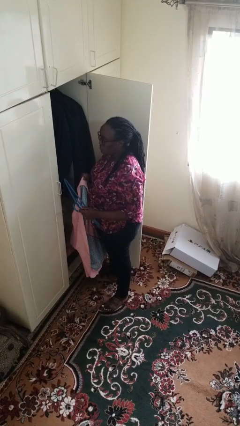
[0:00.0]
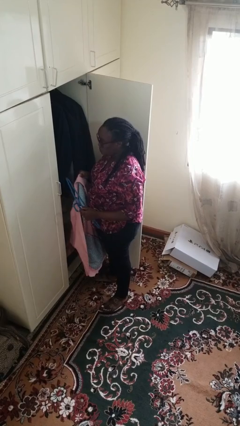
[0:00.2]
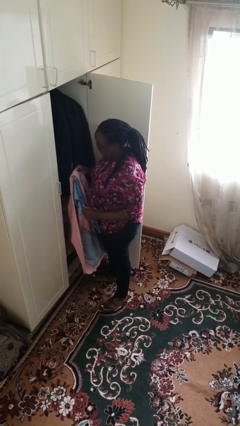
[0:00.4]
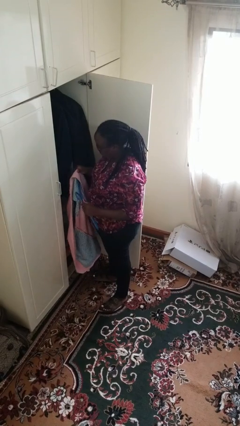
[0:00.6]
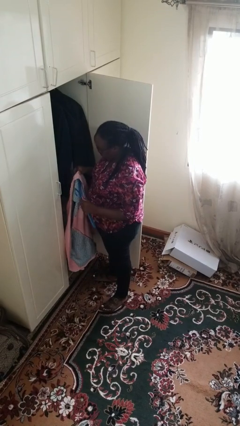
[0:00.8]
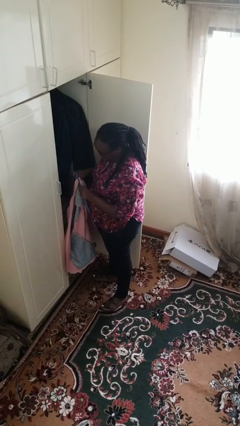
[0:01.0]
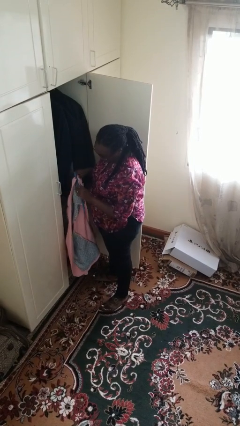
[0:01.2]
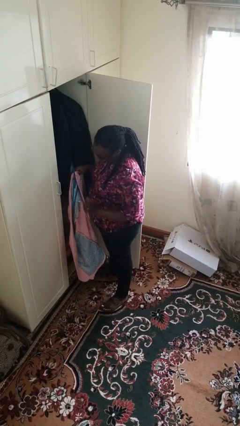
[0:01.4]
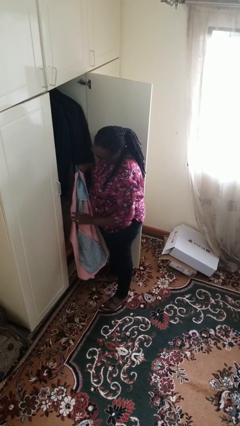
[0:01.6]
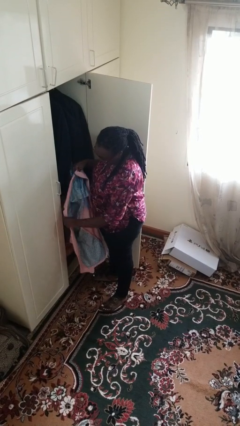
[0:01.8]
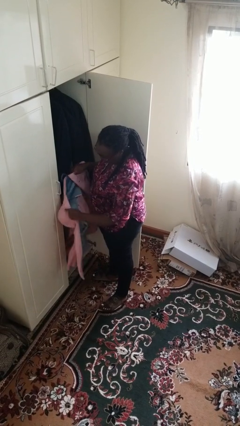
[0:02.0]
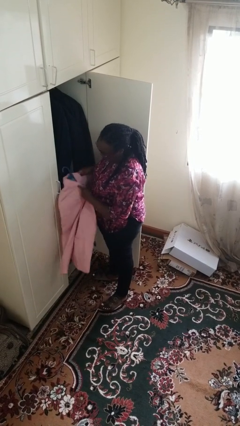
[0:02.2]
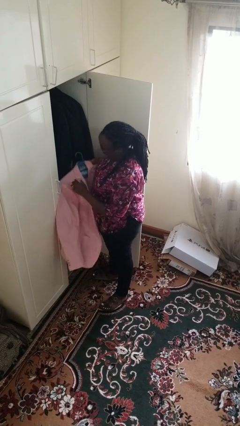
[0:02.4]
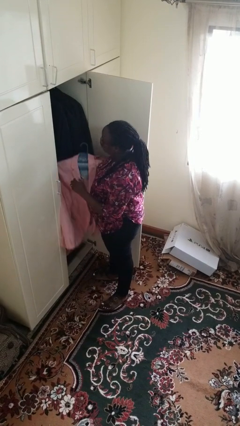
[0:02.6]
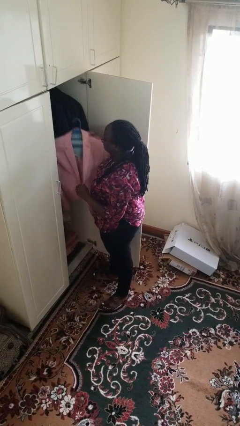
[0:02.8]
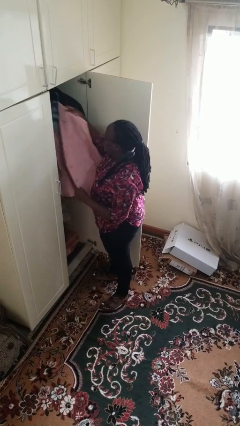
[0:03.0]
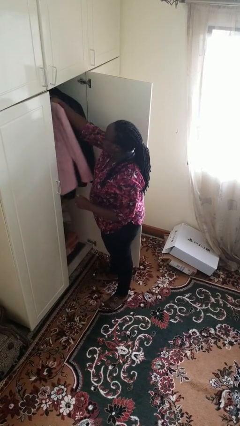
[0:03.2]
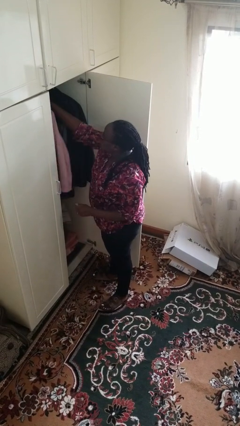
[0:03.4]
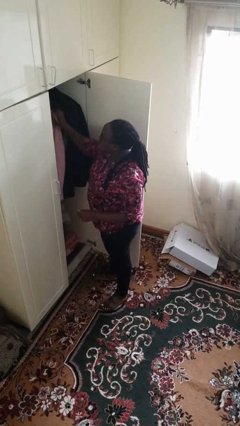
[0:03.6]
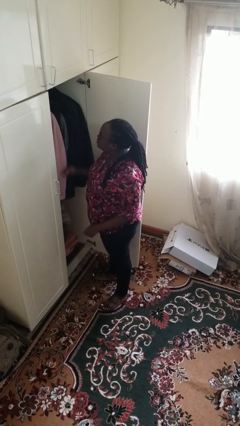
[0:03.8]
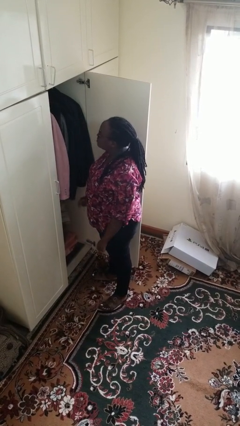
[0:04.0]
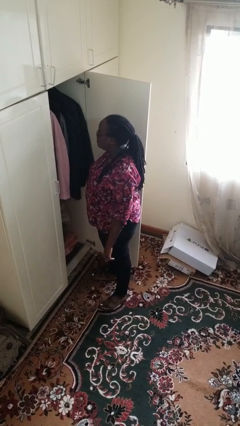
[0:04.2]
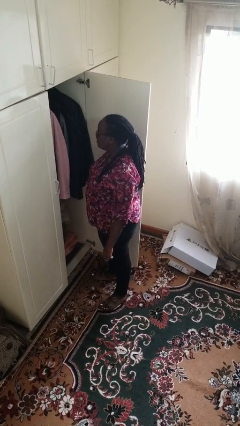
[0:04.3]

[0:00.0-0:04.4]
person puts clothes into closet

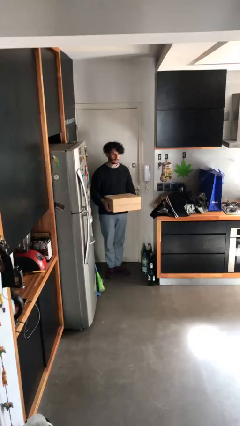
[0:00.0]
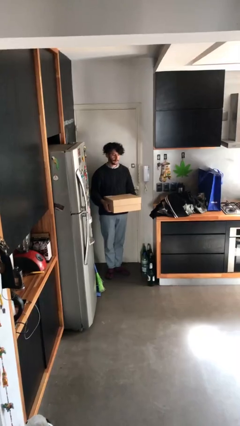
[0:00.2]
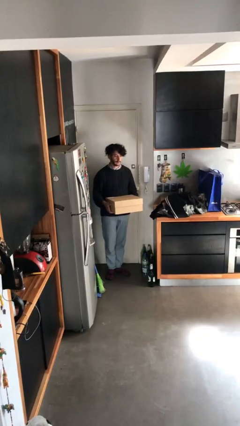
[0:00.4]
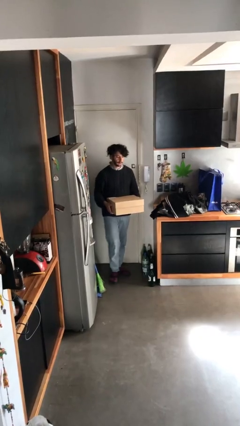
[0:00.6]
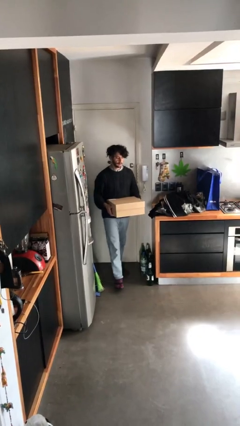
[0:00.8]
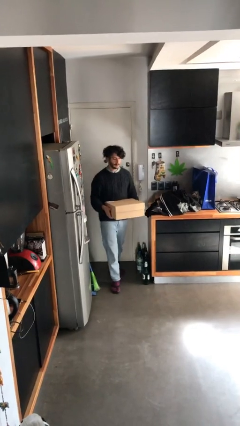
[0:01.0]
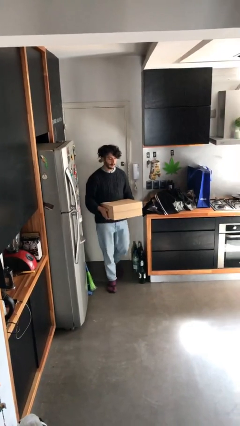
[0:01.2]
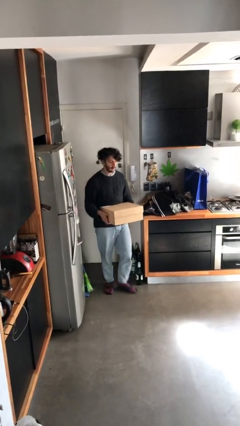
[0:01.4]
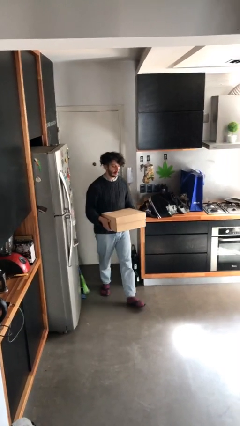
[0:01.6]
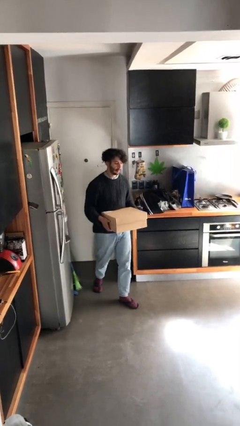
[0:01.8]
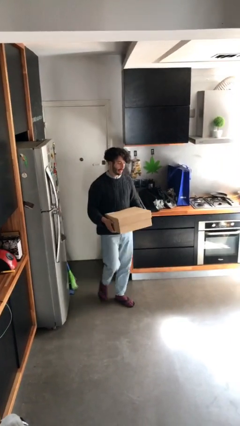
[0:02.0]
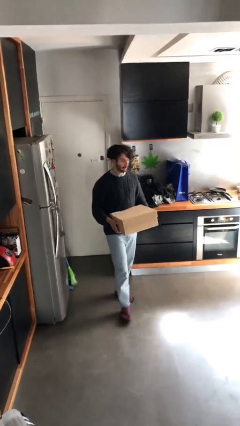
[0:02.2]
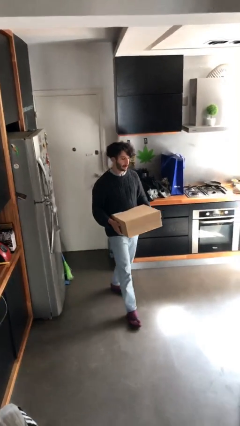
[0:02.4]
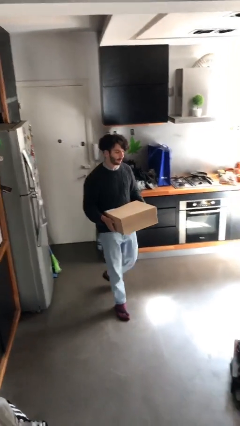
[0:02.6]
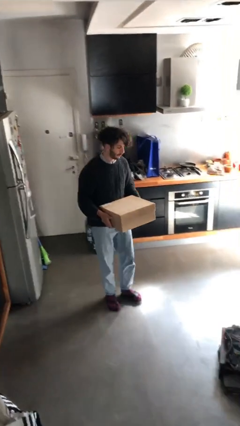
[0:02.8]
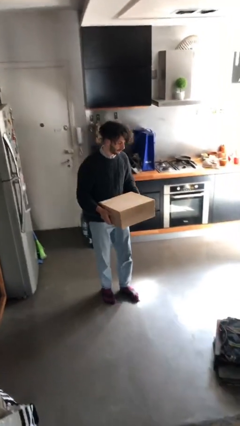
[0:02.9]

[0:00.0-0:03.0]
person carries heavy object

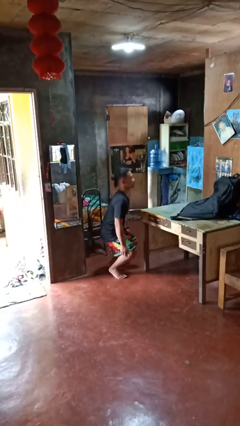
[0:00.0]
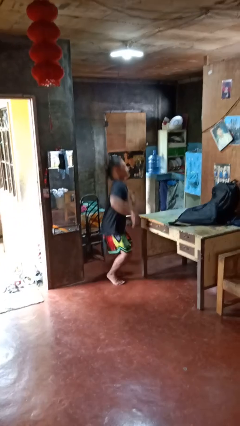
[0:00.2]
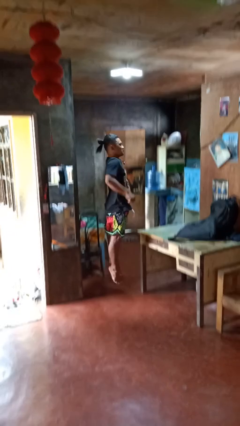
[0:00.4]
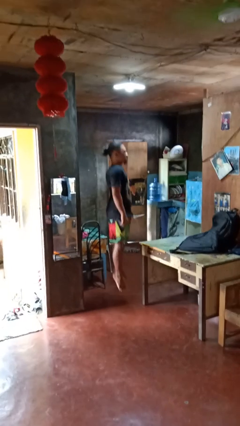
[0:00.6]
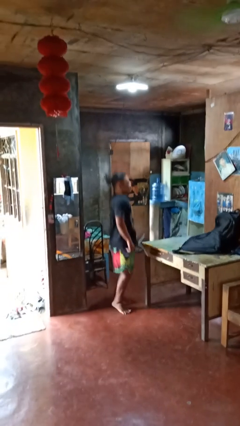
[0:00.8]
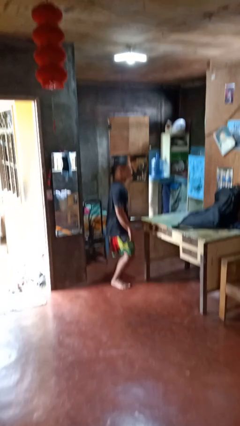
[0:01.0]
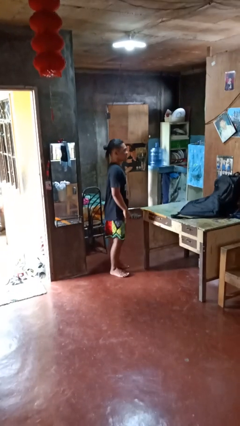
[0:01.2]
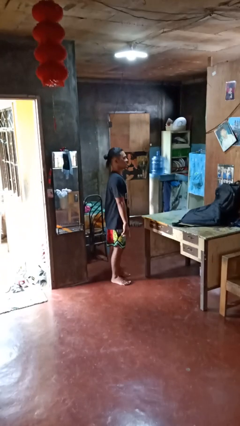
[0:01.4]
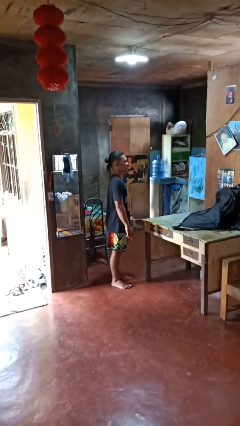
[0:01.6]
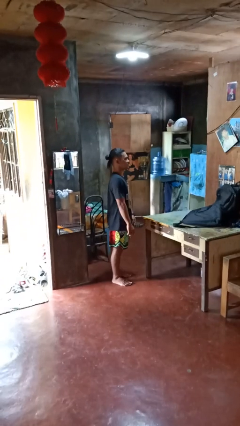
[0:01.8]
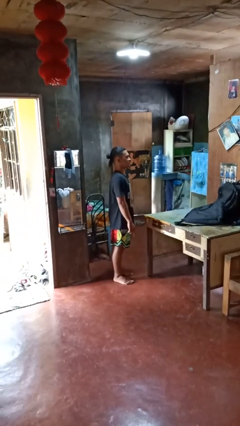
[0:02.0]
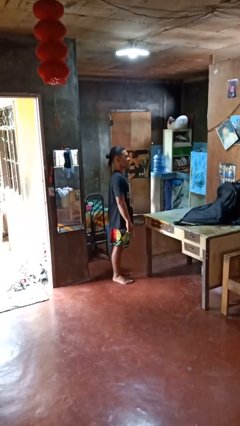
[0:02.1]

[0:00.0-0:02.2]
person jumps

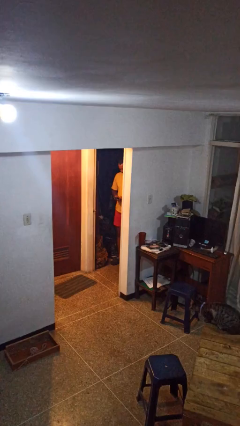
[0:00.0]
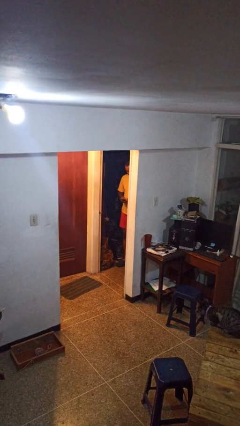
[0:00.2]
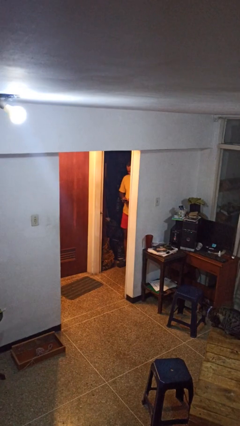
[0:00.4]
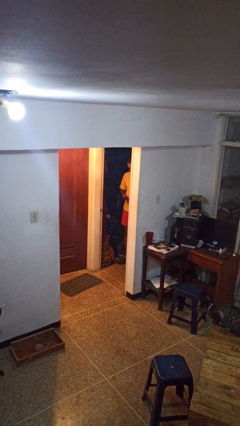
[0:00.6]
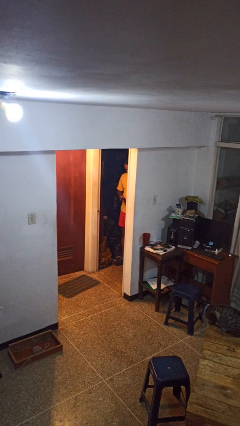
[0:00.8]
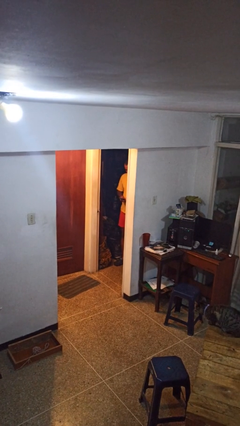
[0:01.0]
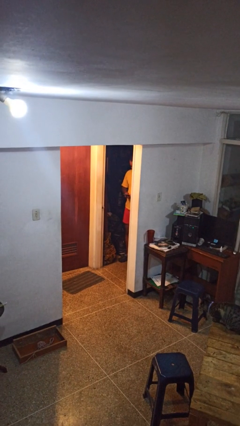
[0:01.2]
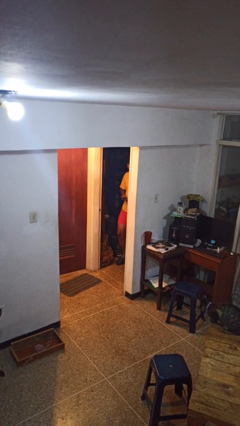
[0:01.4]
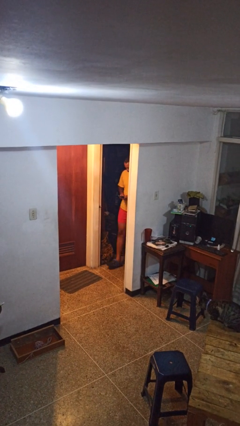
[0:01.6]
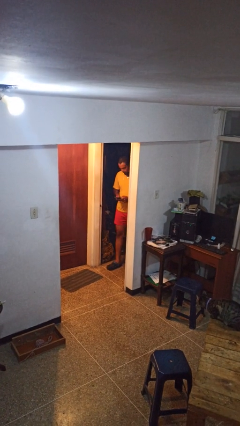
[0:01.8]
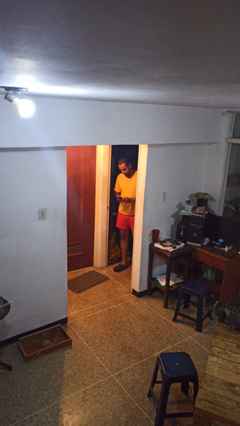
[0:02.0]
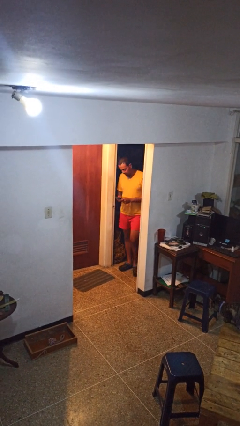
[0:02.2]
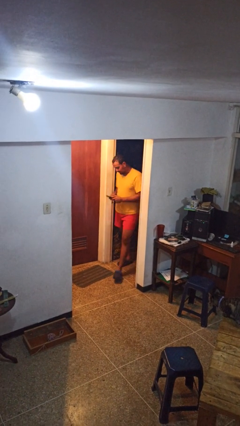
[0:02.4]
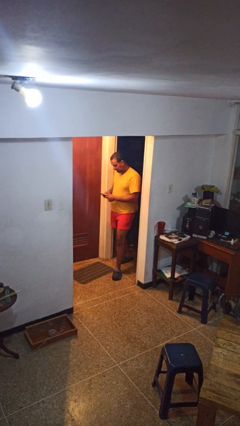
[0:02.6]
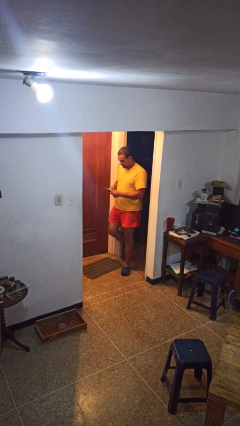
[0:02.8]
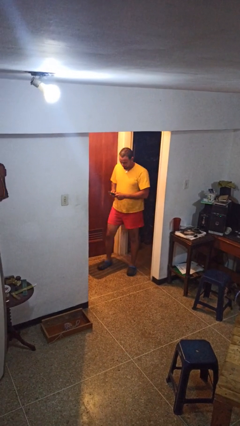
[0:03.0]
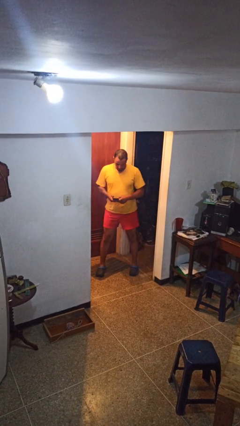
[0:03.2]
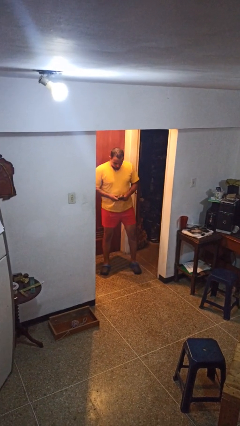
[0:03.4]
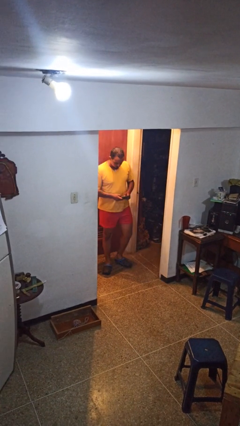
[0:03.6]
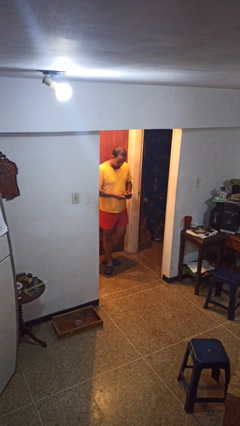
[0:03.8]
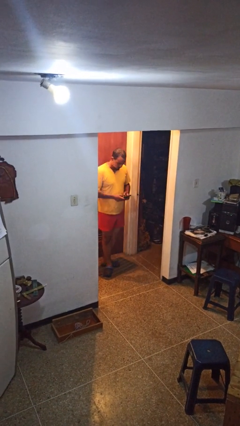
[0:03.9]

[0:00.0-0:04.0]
person enters scene through structure

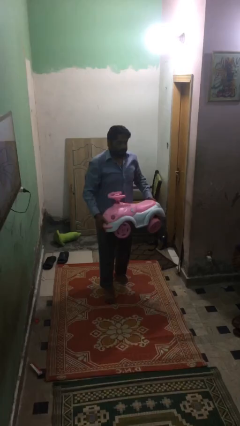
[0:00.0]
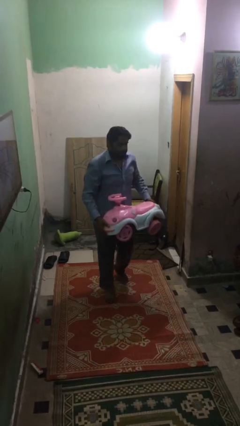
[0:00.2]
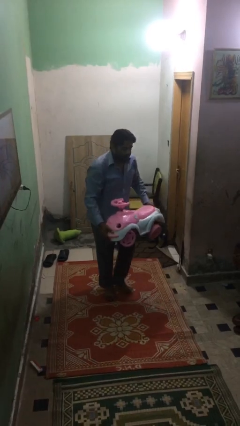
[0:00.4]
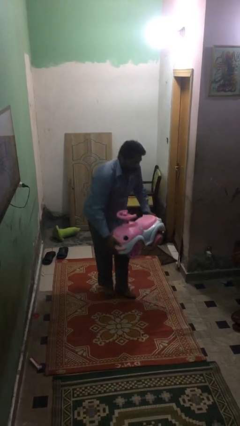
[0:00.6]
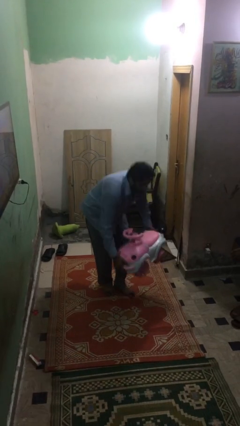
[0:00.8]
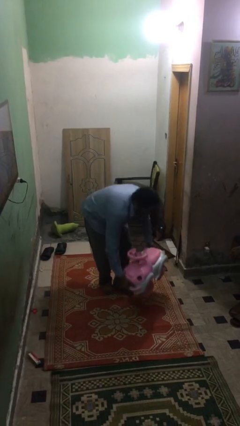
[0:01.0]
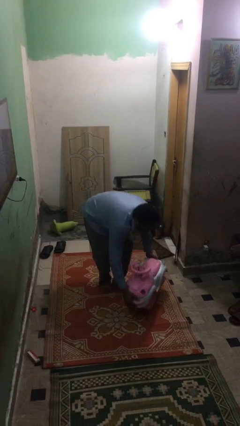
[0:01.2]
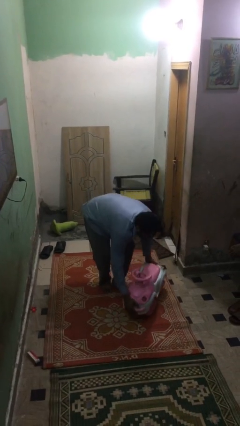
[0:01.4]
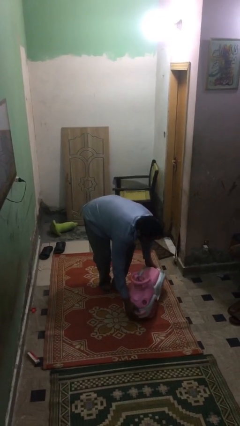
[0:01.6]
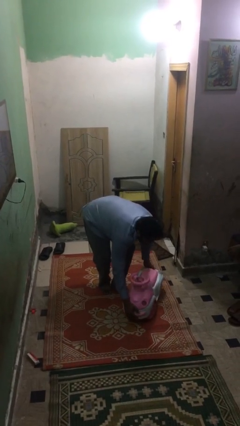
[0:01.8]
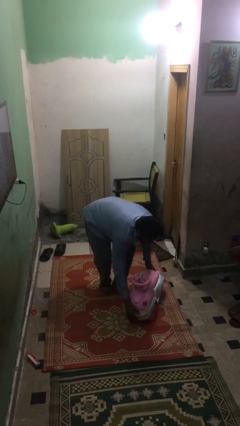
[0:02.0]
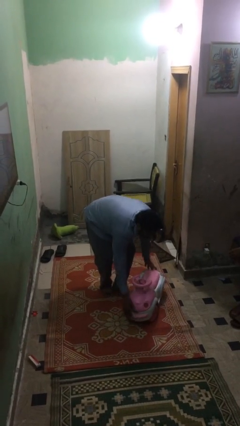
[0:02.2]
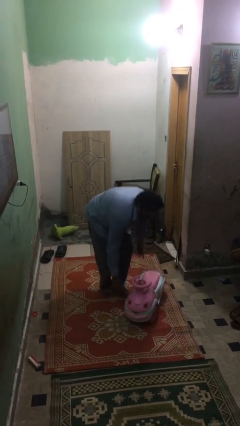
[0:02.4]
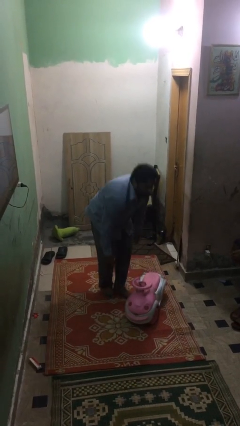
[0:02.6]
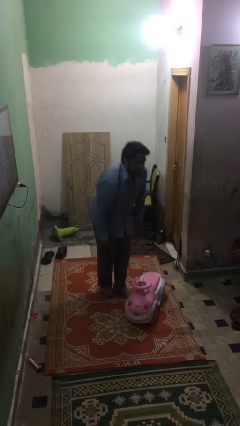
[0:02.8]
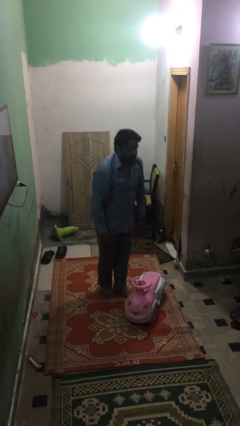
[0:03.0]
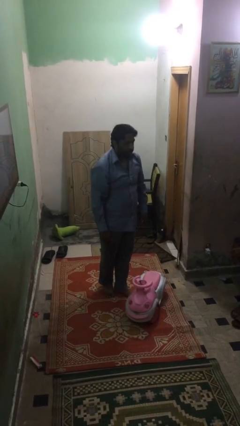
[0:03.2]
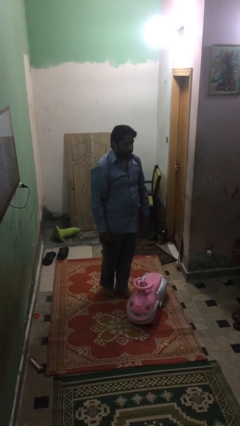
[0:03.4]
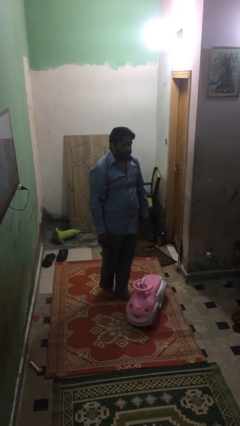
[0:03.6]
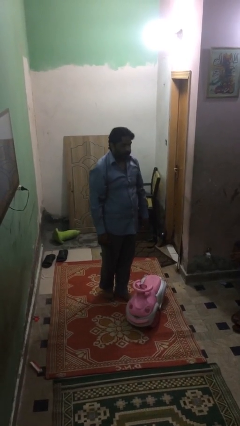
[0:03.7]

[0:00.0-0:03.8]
person puts down object on floor

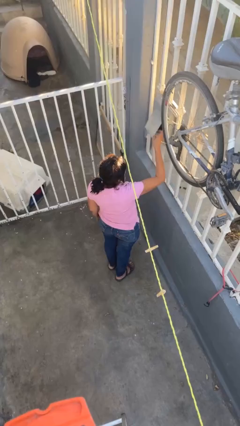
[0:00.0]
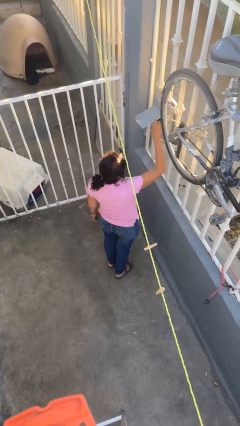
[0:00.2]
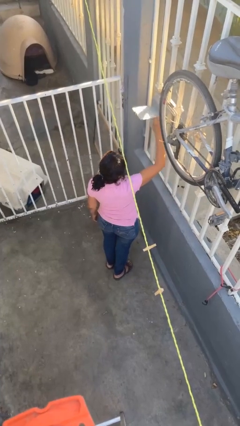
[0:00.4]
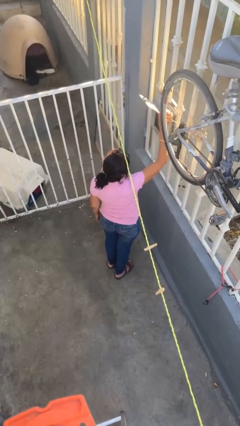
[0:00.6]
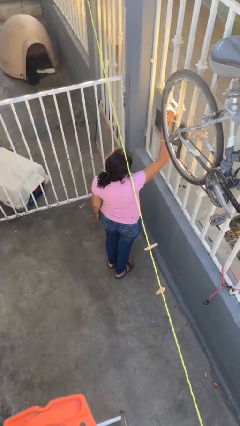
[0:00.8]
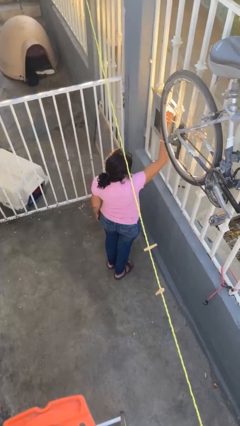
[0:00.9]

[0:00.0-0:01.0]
person opens mailbox
